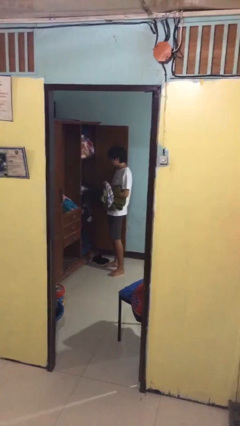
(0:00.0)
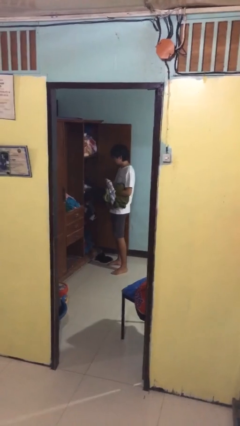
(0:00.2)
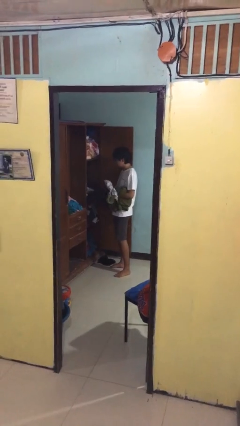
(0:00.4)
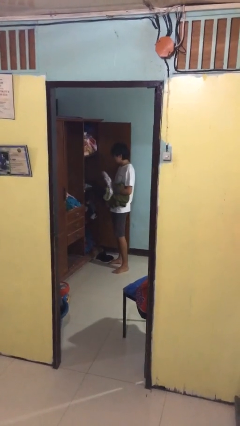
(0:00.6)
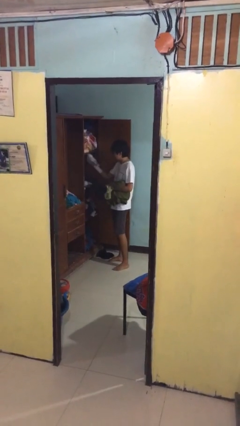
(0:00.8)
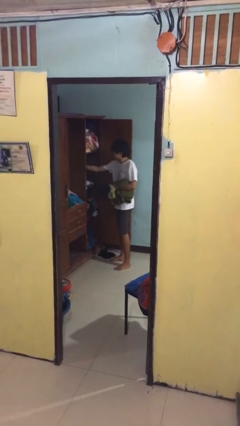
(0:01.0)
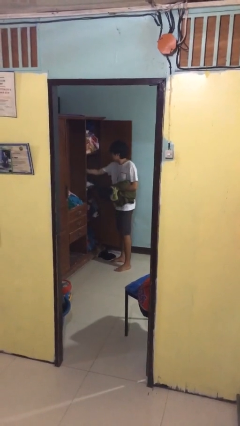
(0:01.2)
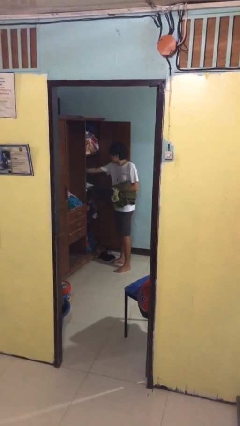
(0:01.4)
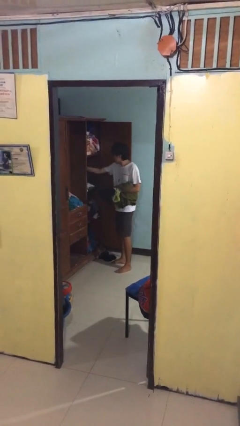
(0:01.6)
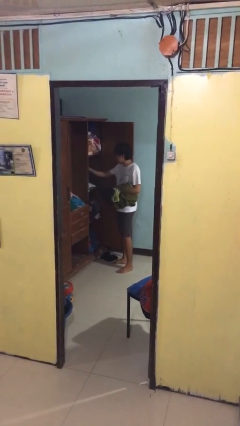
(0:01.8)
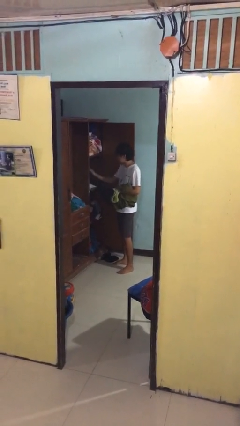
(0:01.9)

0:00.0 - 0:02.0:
person puts clothes into dresser

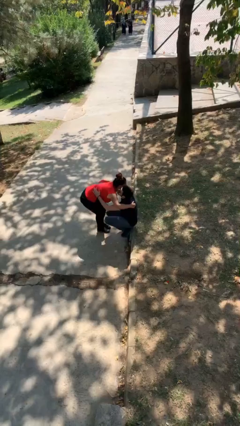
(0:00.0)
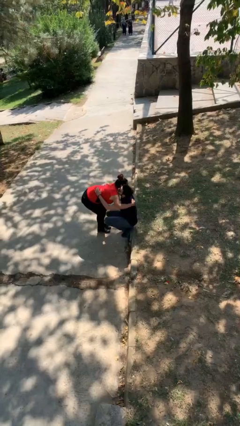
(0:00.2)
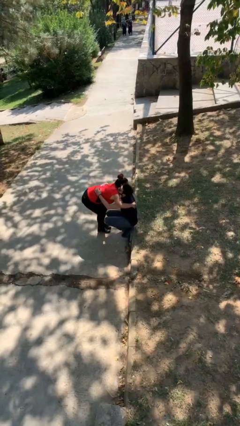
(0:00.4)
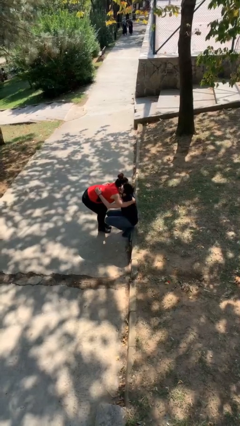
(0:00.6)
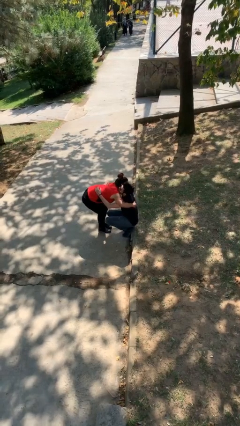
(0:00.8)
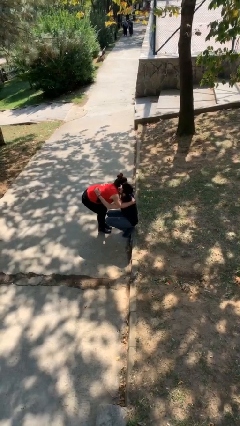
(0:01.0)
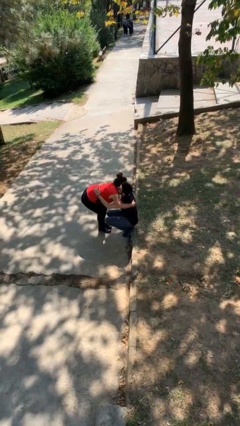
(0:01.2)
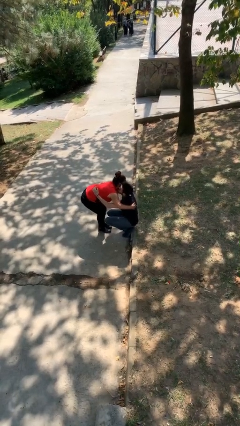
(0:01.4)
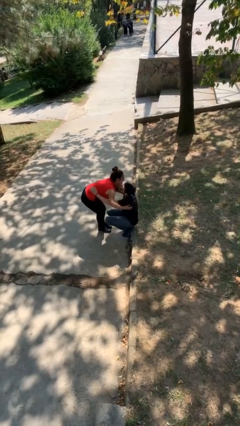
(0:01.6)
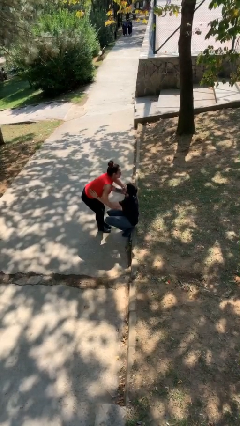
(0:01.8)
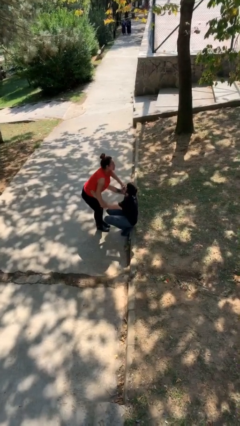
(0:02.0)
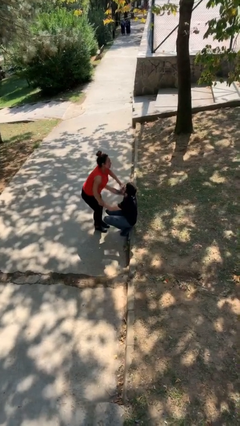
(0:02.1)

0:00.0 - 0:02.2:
person embraces person

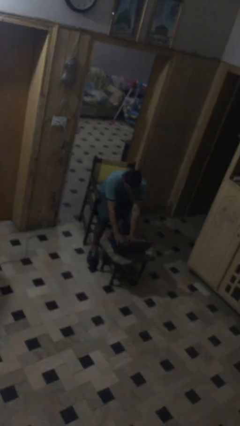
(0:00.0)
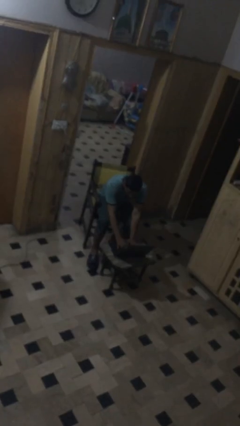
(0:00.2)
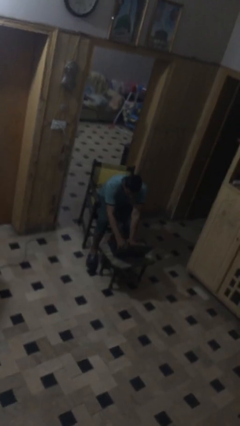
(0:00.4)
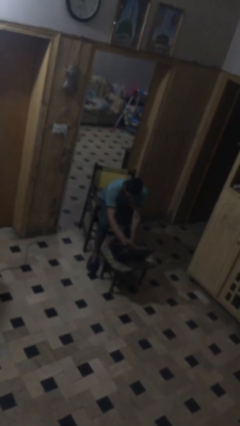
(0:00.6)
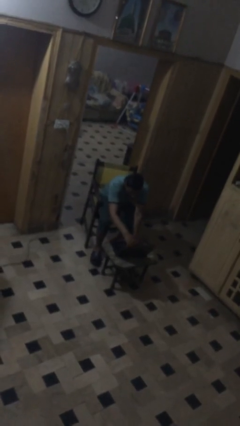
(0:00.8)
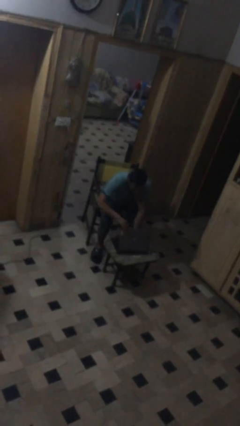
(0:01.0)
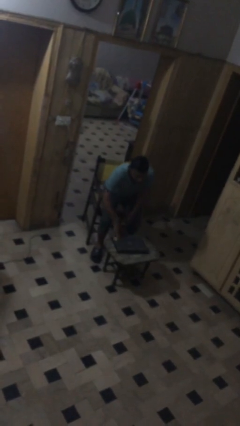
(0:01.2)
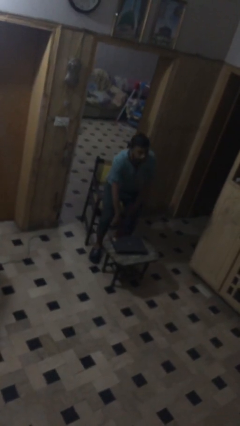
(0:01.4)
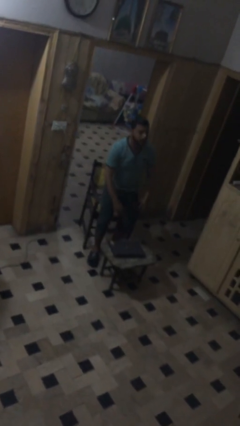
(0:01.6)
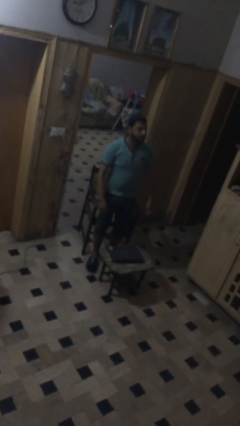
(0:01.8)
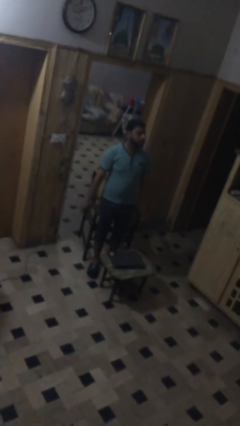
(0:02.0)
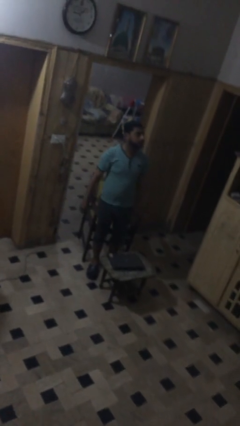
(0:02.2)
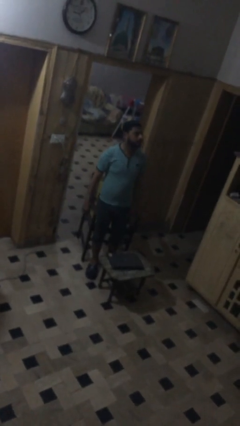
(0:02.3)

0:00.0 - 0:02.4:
person stands up

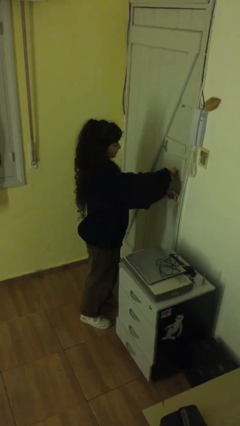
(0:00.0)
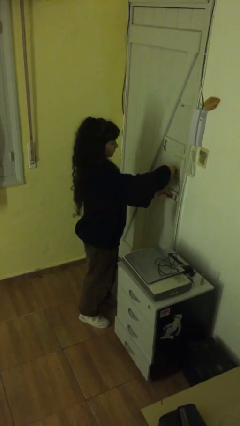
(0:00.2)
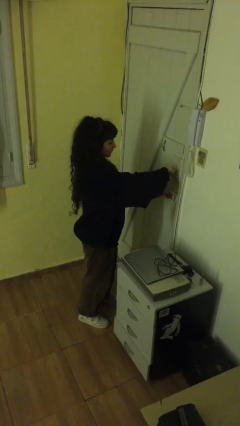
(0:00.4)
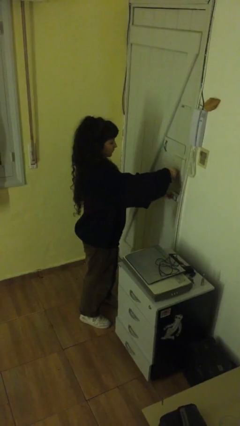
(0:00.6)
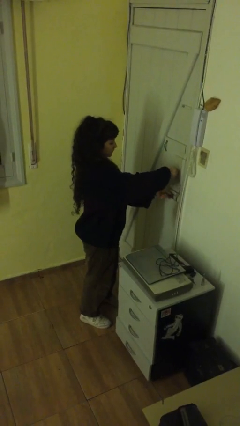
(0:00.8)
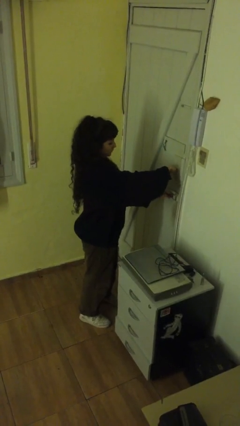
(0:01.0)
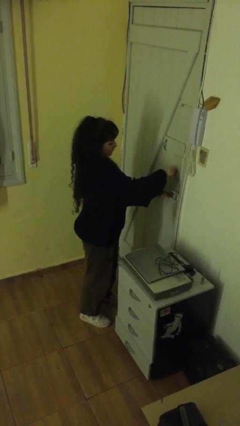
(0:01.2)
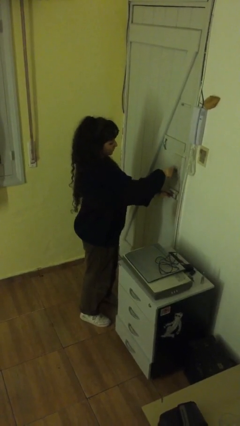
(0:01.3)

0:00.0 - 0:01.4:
person locks door with keys

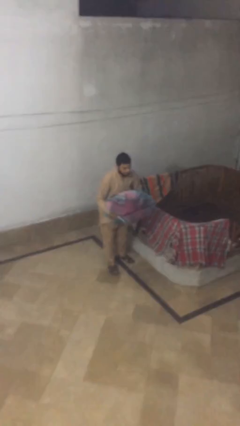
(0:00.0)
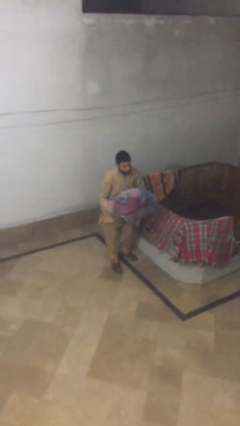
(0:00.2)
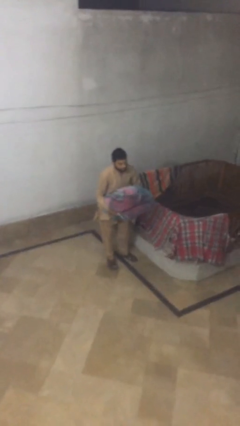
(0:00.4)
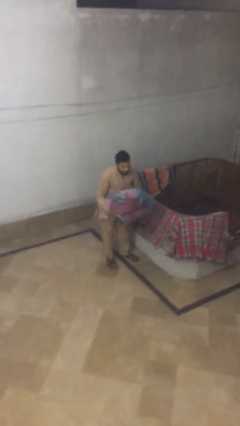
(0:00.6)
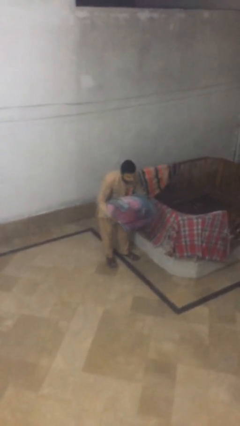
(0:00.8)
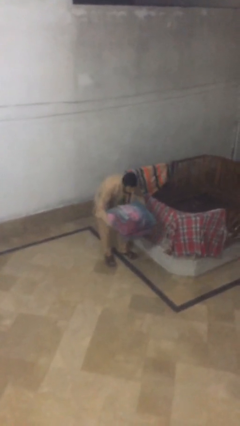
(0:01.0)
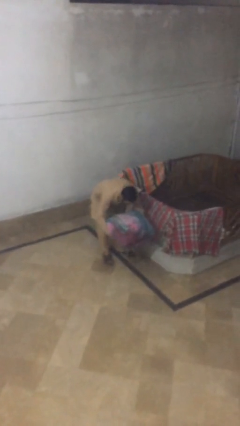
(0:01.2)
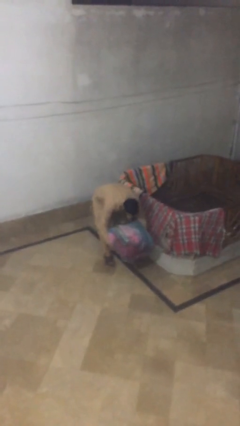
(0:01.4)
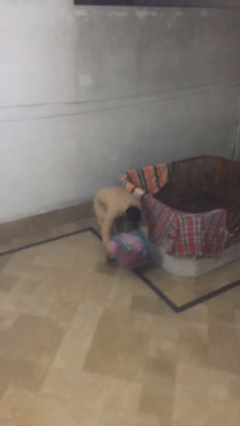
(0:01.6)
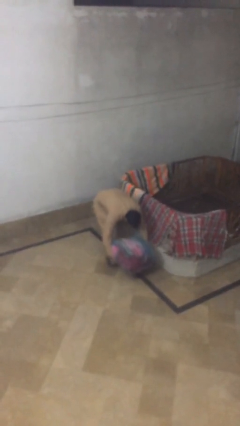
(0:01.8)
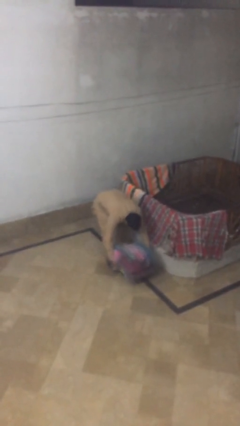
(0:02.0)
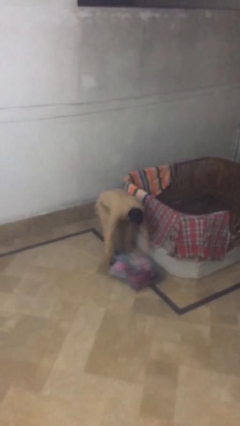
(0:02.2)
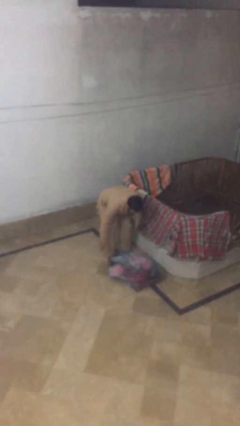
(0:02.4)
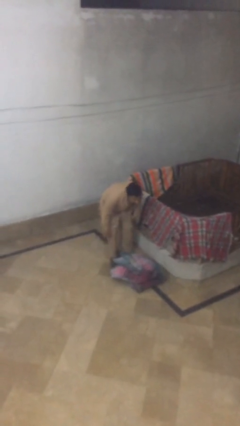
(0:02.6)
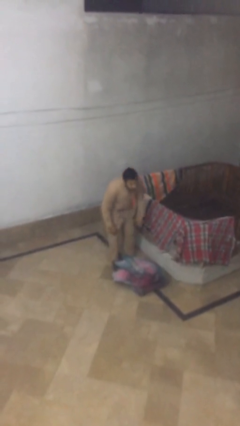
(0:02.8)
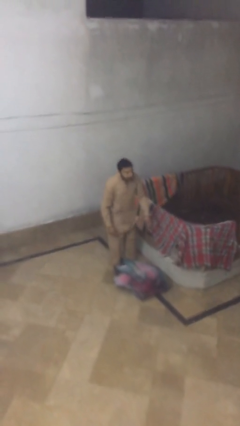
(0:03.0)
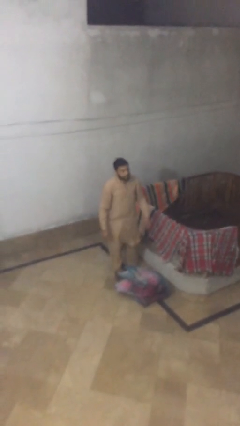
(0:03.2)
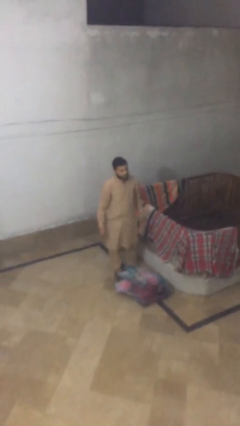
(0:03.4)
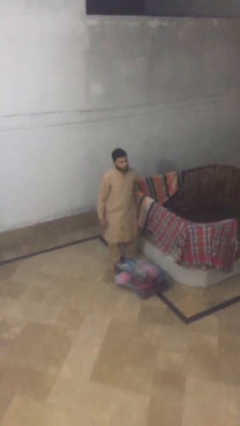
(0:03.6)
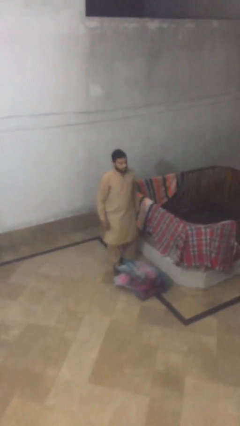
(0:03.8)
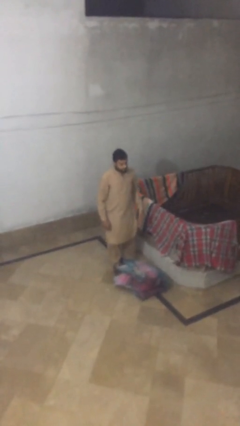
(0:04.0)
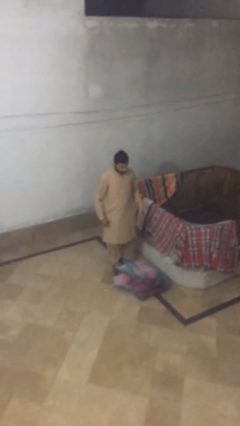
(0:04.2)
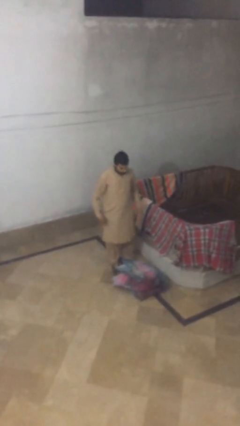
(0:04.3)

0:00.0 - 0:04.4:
person puts down object on floor

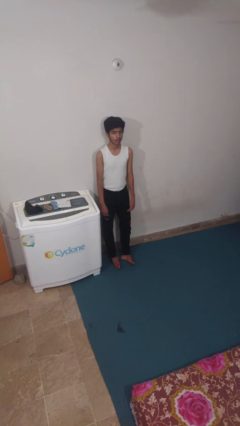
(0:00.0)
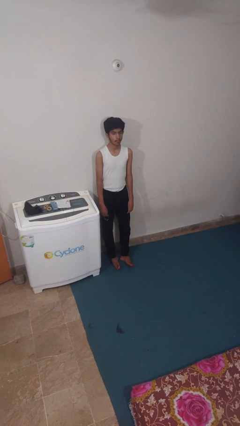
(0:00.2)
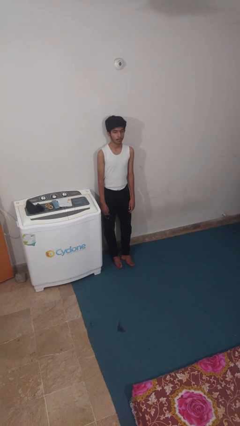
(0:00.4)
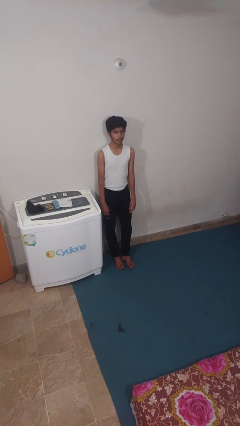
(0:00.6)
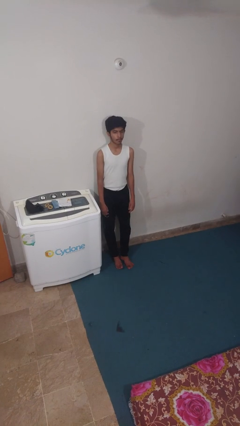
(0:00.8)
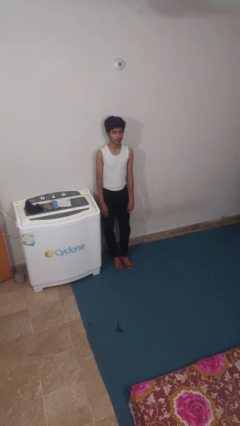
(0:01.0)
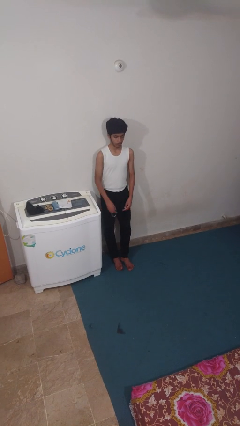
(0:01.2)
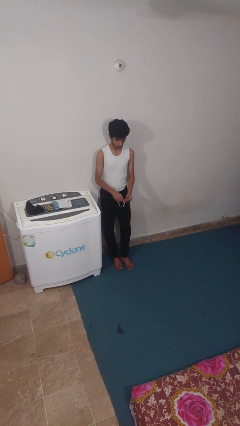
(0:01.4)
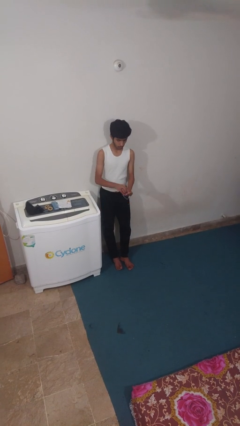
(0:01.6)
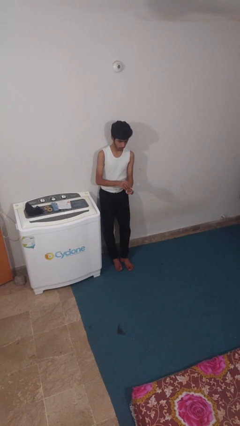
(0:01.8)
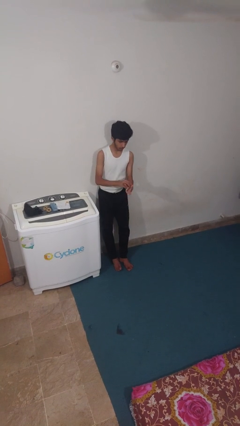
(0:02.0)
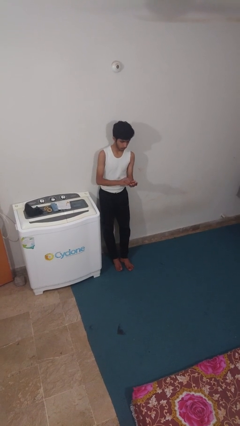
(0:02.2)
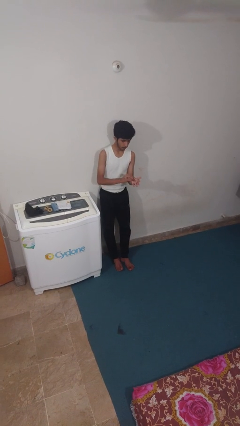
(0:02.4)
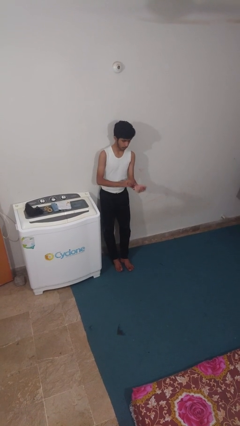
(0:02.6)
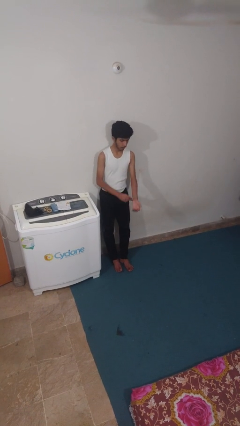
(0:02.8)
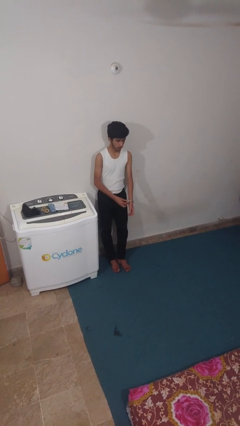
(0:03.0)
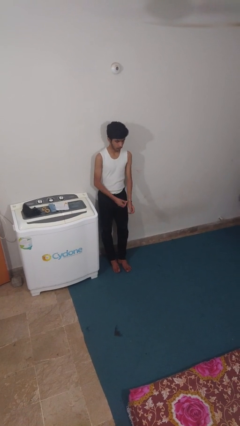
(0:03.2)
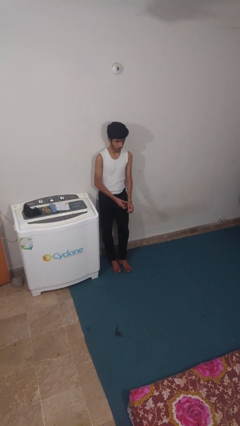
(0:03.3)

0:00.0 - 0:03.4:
person puts on wristwatch

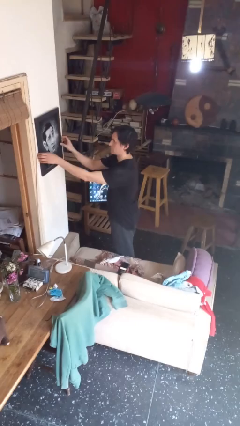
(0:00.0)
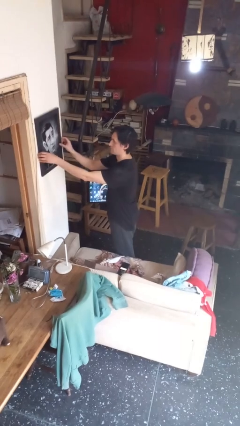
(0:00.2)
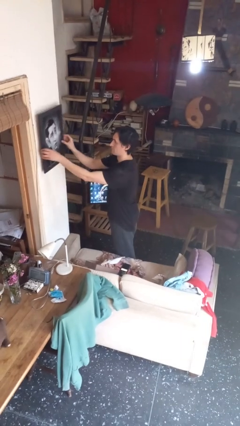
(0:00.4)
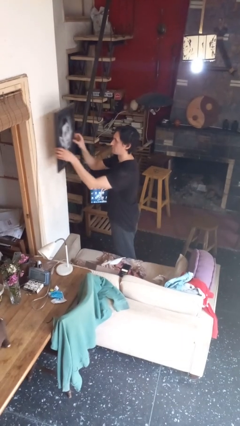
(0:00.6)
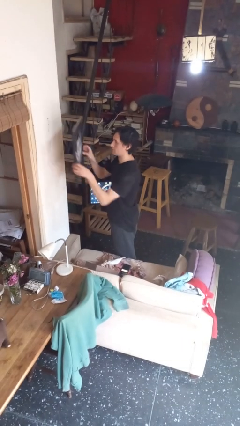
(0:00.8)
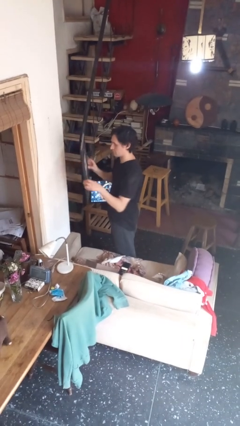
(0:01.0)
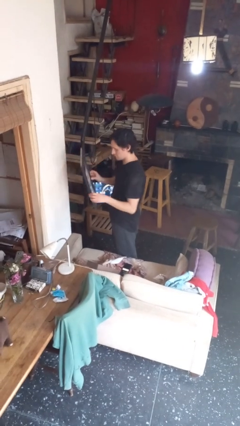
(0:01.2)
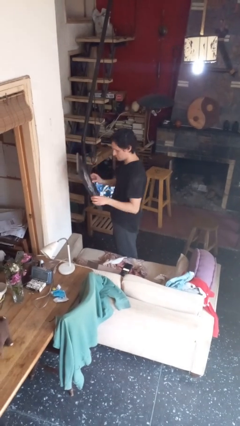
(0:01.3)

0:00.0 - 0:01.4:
person takes down picture frame
